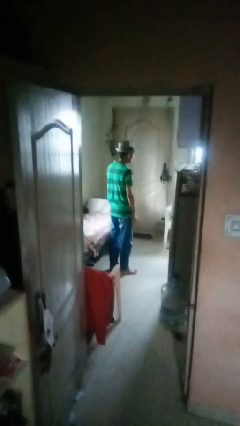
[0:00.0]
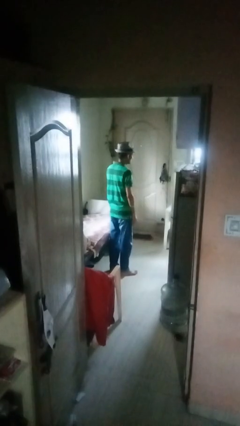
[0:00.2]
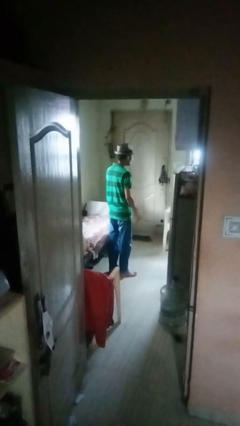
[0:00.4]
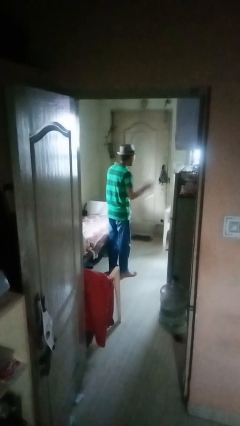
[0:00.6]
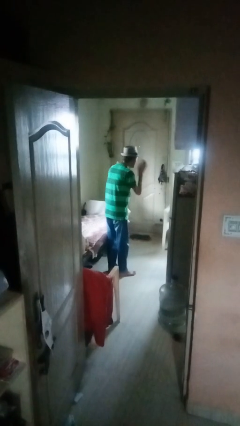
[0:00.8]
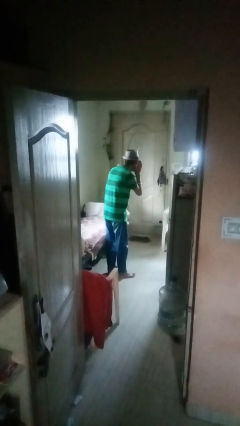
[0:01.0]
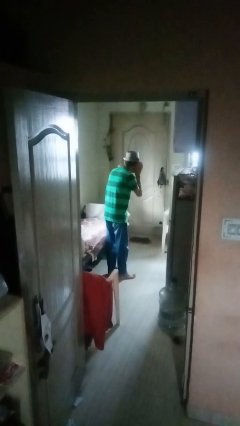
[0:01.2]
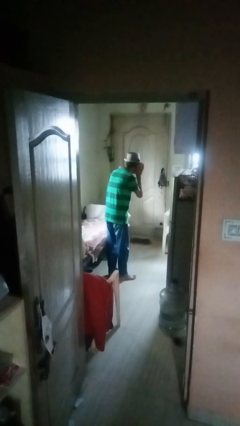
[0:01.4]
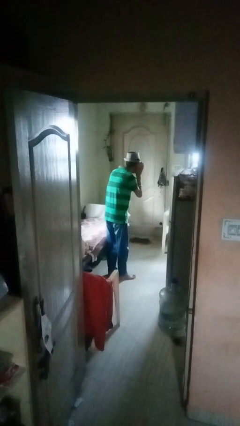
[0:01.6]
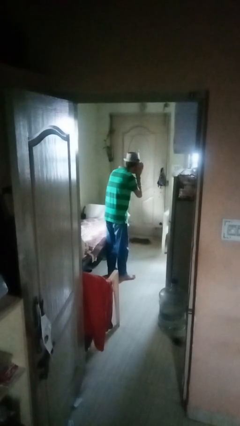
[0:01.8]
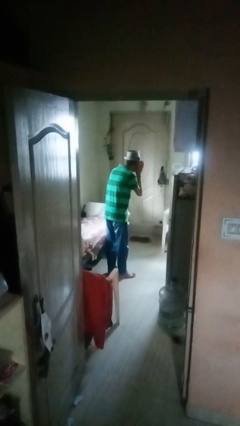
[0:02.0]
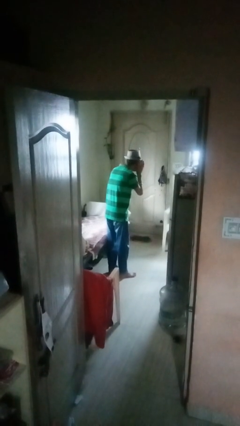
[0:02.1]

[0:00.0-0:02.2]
person gestures listen closely

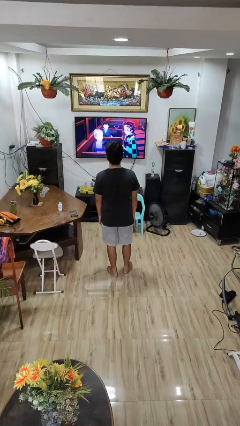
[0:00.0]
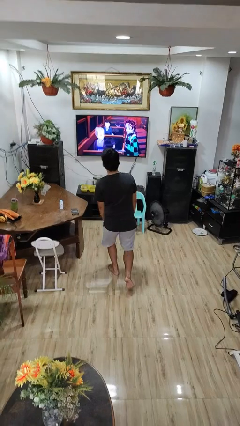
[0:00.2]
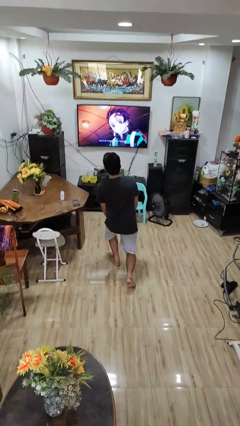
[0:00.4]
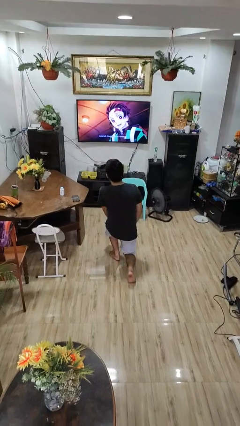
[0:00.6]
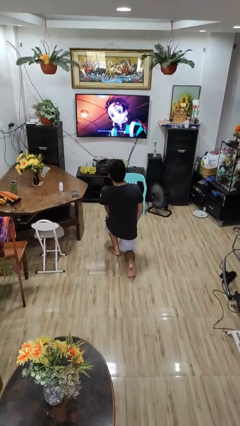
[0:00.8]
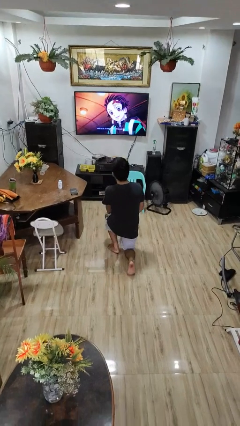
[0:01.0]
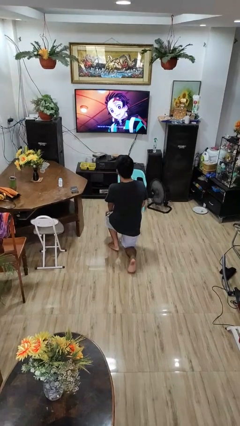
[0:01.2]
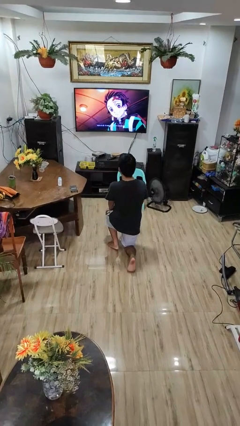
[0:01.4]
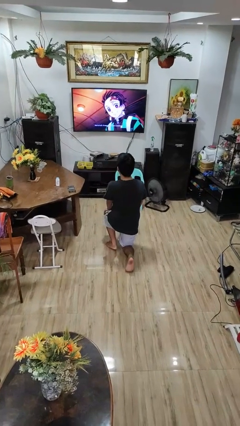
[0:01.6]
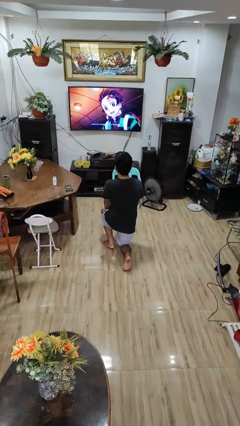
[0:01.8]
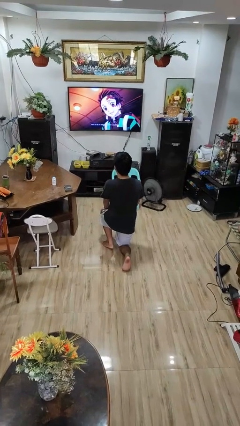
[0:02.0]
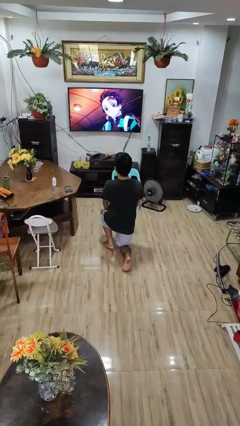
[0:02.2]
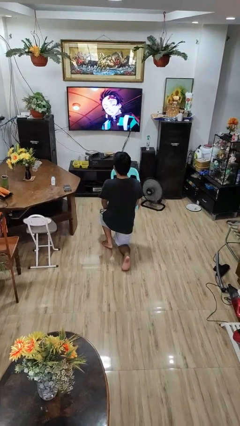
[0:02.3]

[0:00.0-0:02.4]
person kneels

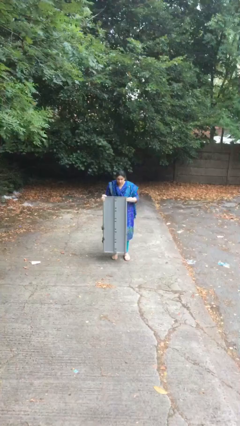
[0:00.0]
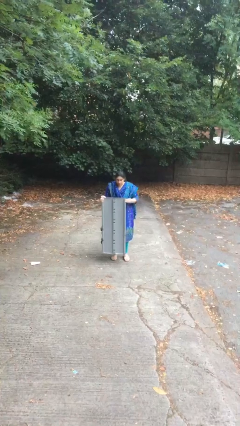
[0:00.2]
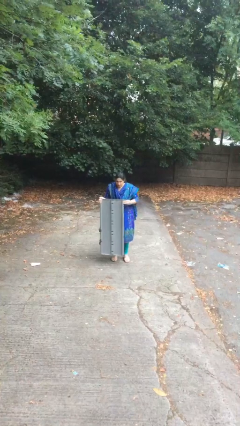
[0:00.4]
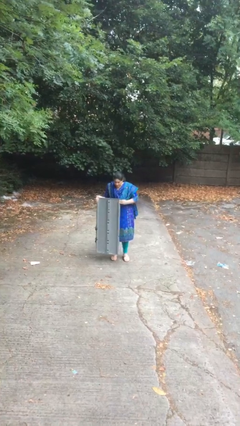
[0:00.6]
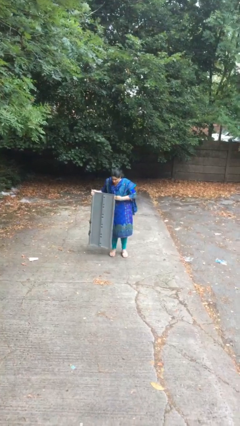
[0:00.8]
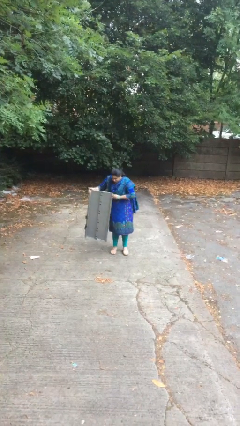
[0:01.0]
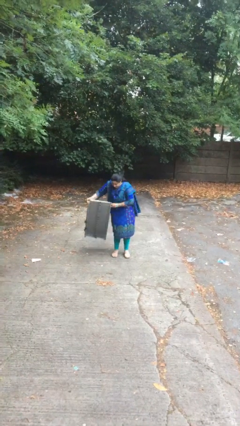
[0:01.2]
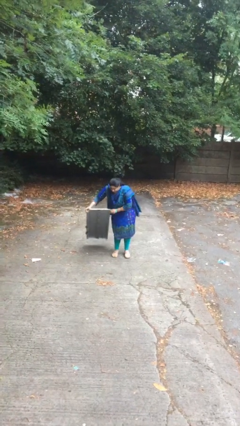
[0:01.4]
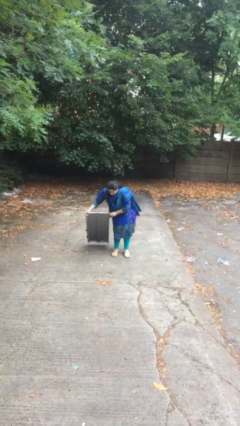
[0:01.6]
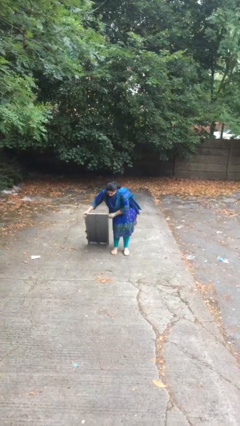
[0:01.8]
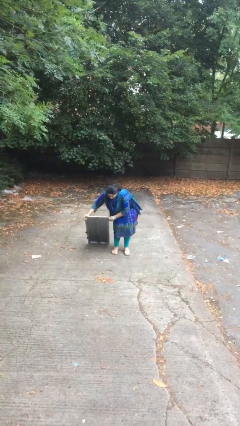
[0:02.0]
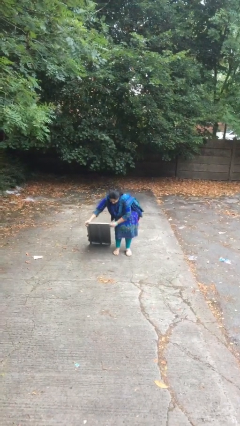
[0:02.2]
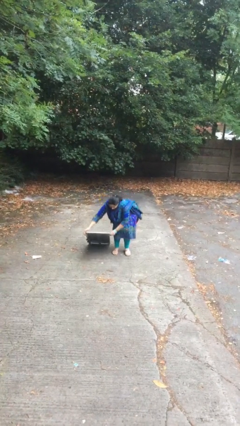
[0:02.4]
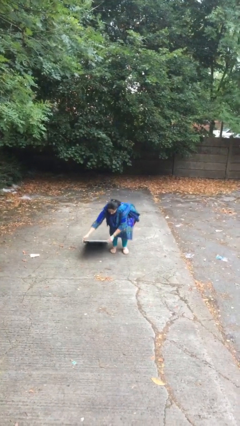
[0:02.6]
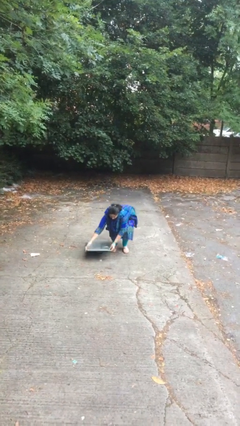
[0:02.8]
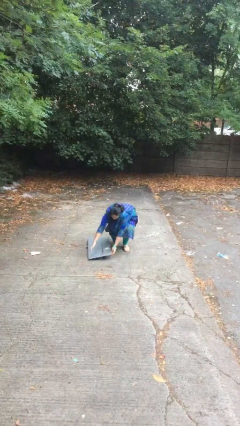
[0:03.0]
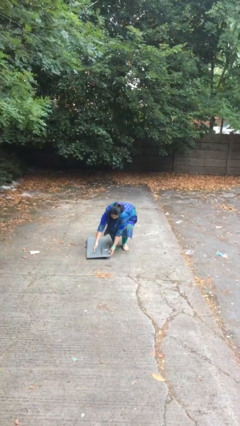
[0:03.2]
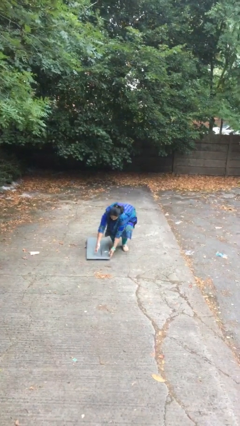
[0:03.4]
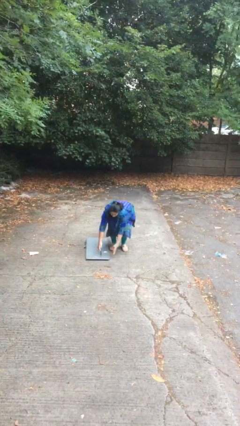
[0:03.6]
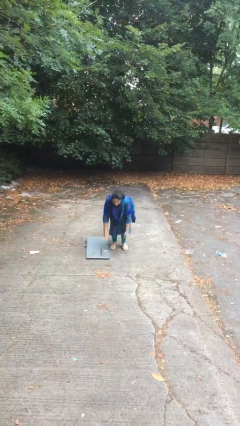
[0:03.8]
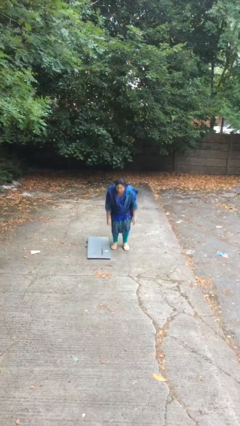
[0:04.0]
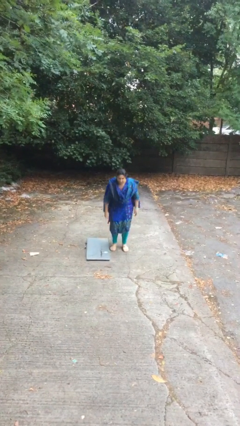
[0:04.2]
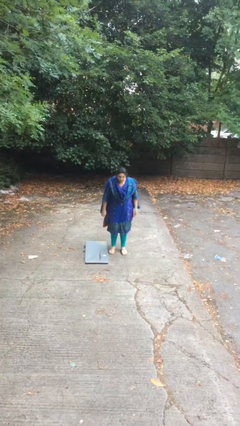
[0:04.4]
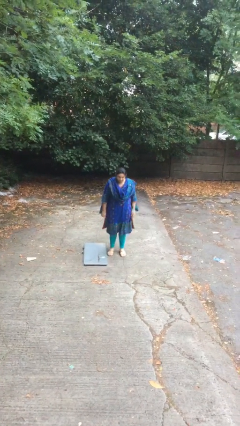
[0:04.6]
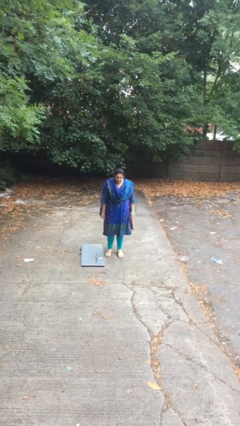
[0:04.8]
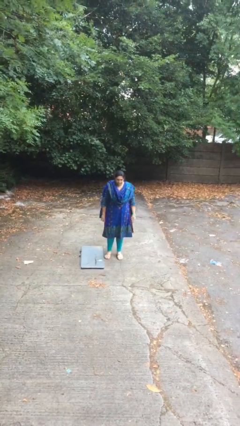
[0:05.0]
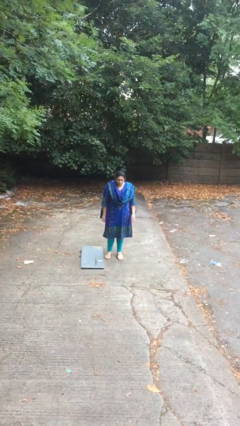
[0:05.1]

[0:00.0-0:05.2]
person puts down object on floor

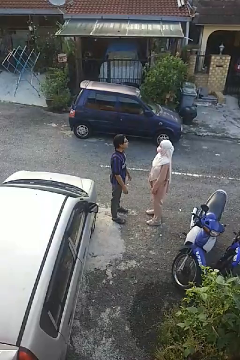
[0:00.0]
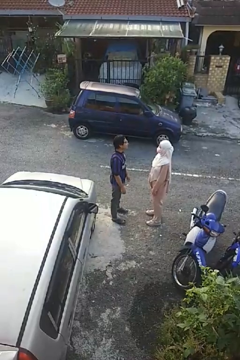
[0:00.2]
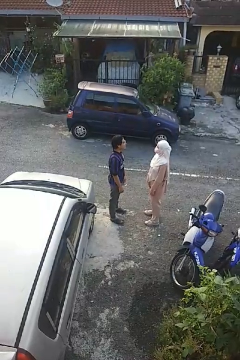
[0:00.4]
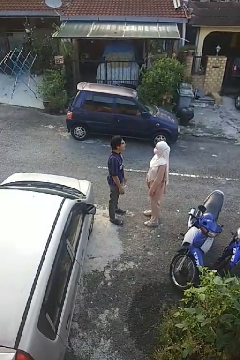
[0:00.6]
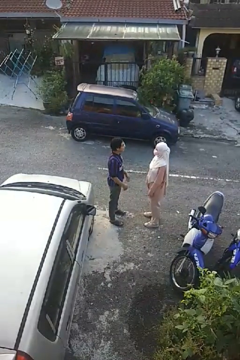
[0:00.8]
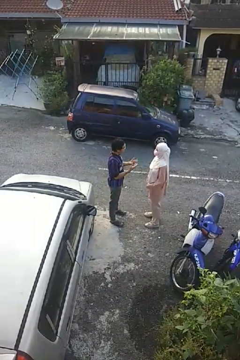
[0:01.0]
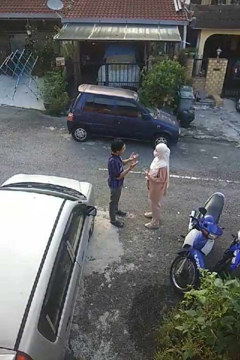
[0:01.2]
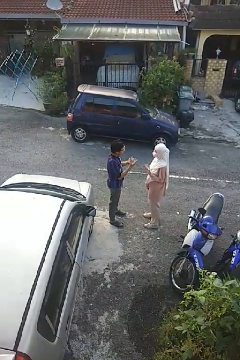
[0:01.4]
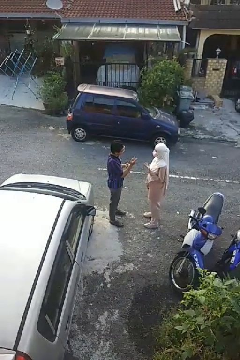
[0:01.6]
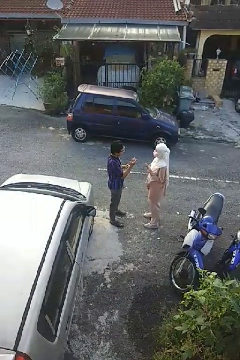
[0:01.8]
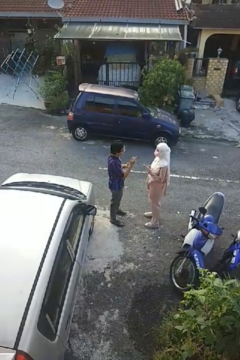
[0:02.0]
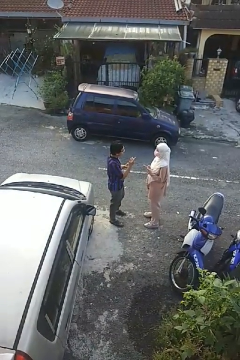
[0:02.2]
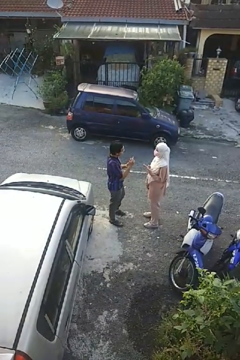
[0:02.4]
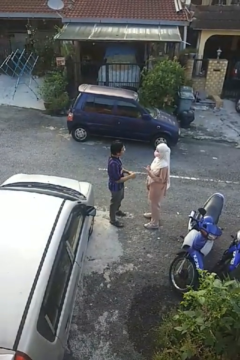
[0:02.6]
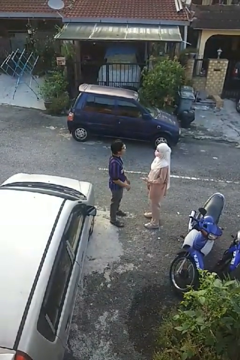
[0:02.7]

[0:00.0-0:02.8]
person talks to person

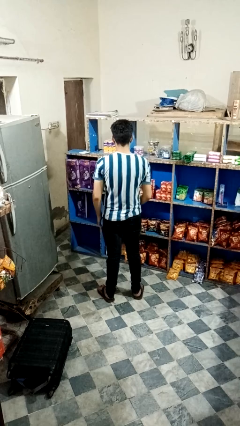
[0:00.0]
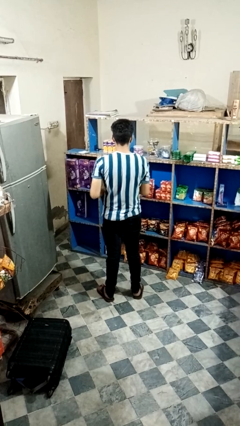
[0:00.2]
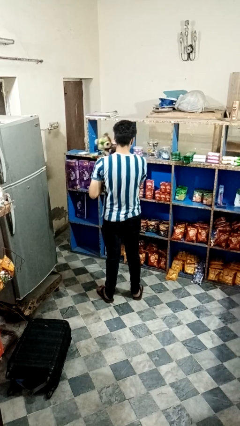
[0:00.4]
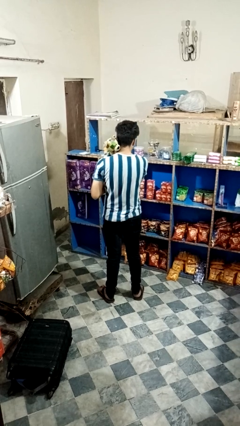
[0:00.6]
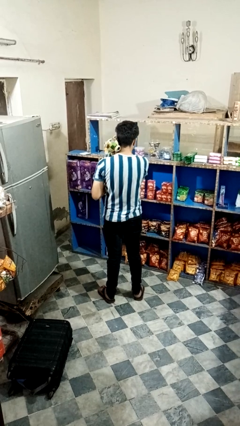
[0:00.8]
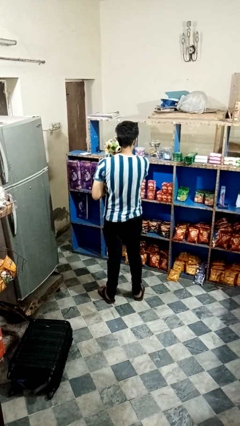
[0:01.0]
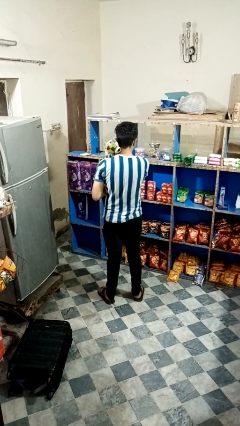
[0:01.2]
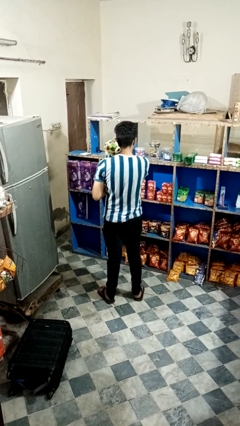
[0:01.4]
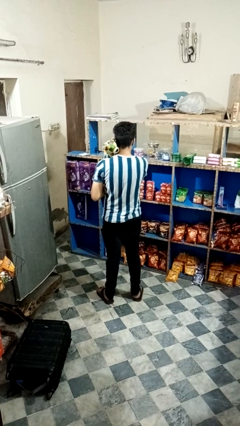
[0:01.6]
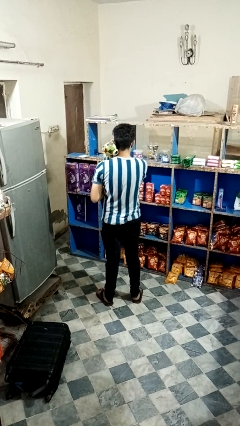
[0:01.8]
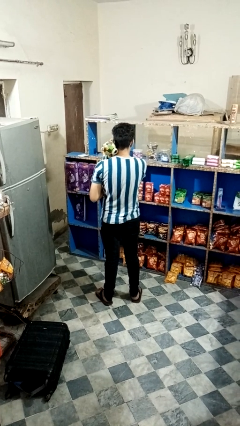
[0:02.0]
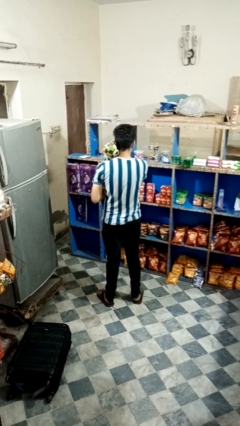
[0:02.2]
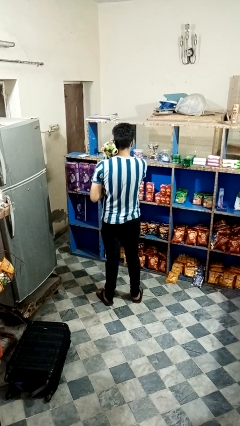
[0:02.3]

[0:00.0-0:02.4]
person hugs stuffed animal

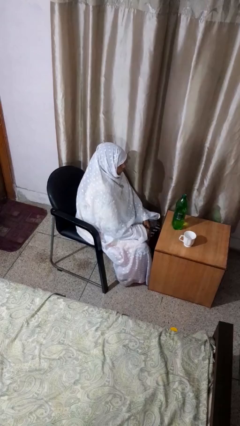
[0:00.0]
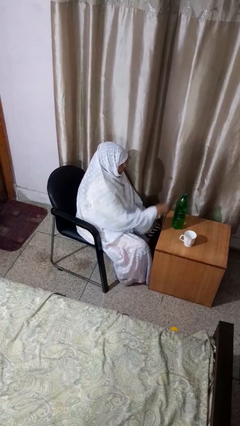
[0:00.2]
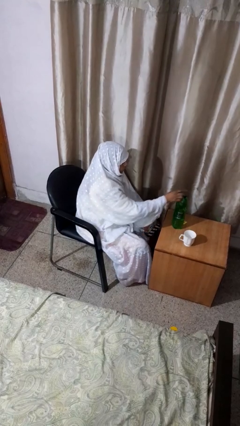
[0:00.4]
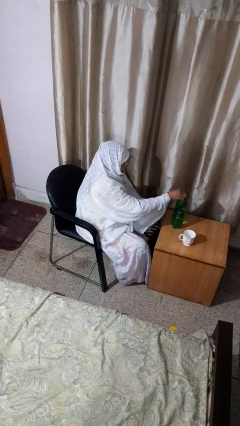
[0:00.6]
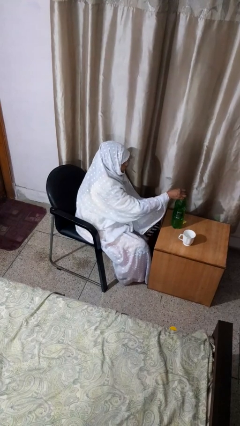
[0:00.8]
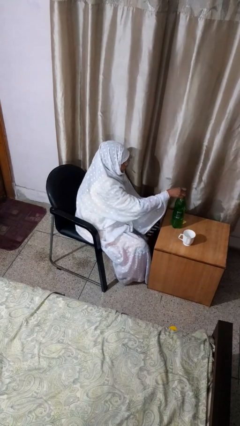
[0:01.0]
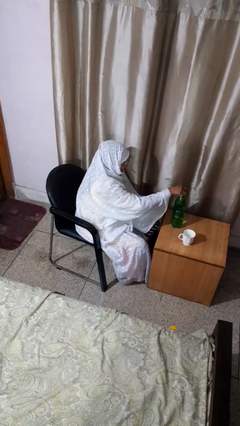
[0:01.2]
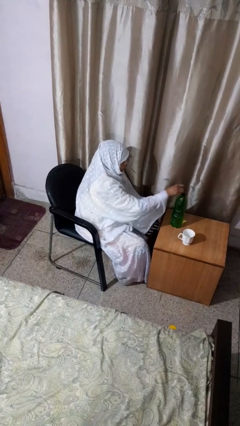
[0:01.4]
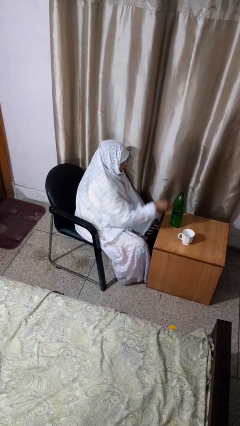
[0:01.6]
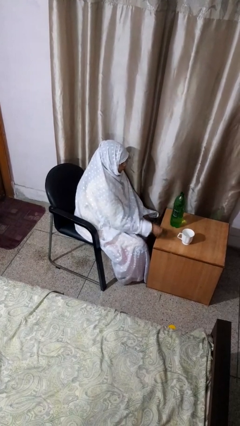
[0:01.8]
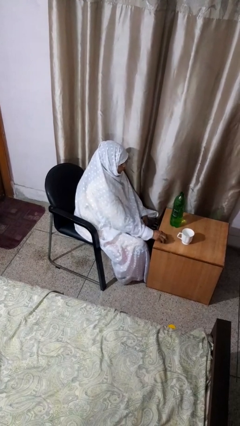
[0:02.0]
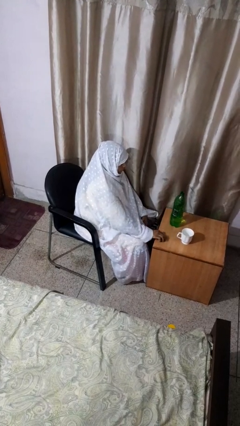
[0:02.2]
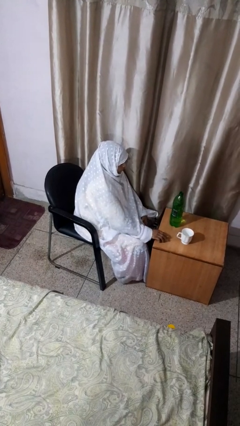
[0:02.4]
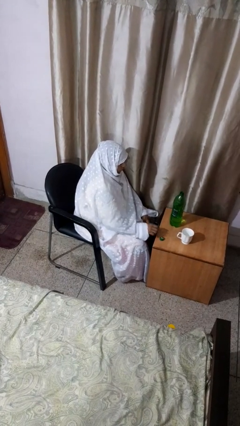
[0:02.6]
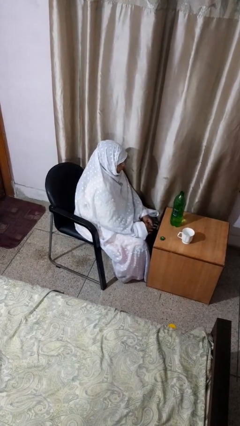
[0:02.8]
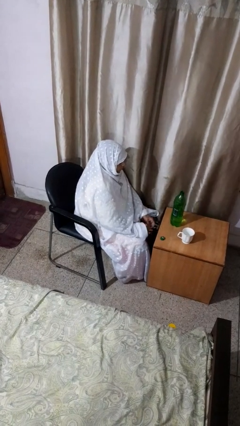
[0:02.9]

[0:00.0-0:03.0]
person unscrews lid from bottle
